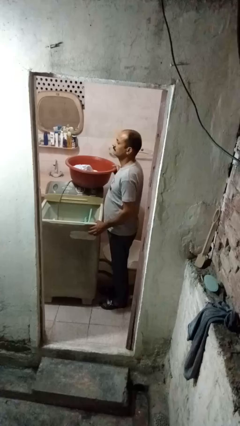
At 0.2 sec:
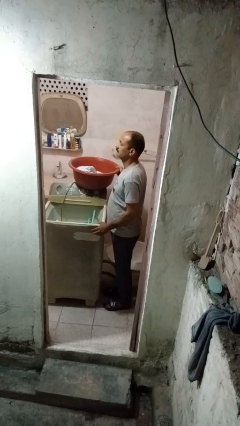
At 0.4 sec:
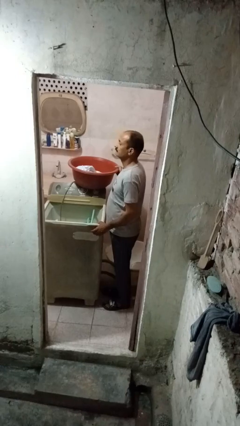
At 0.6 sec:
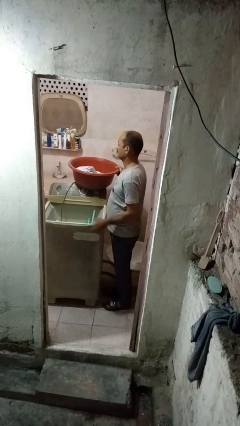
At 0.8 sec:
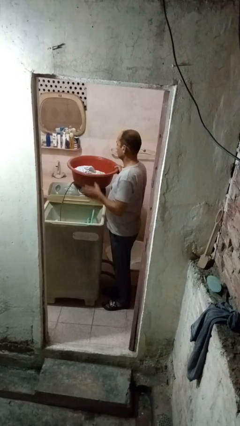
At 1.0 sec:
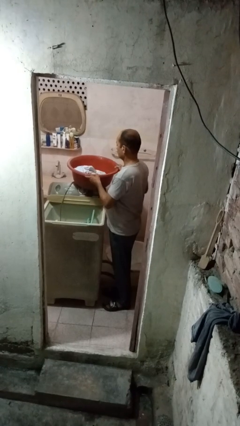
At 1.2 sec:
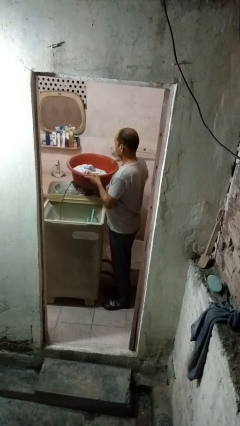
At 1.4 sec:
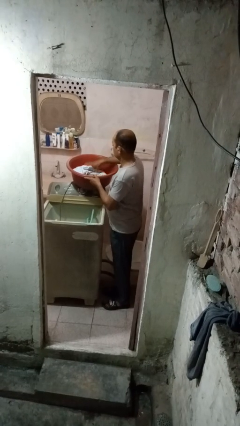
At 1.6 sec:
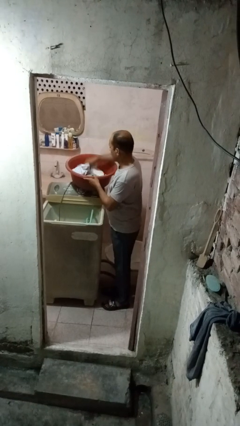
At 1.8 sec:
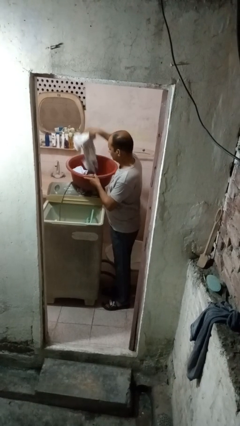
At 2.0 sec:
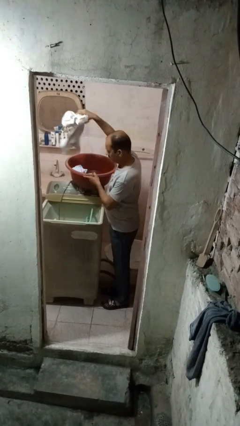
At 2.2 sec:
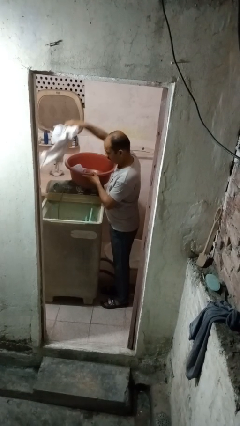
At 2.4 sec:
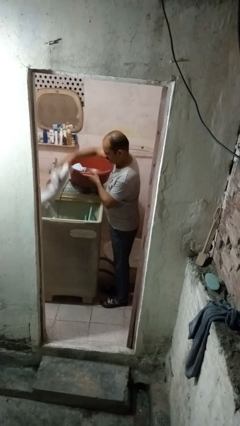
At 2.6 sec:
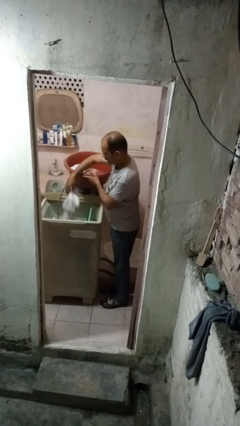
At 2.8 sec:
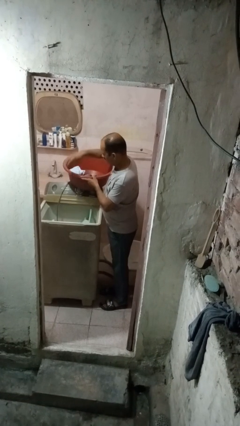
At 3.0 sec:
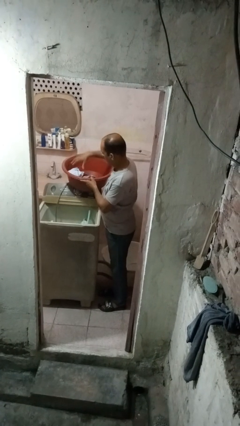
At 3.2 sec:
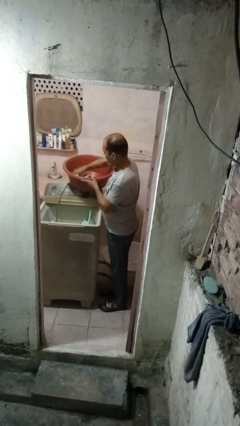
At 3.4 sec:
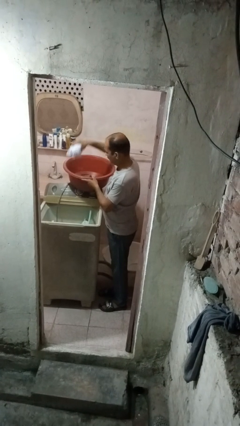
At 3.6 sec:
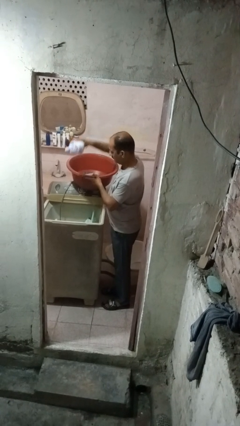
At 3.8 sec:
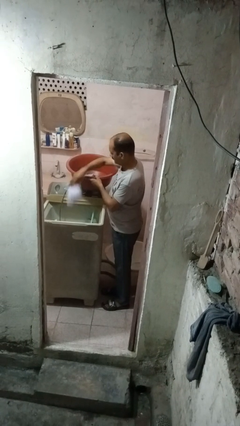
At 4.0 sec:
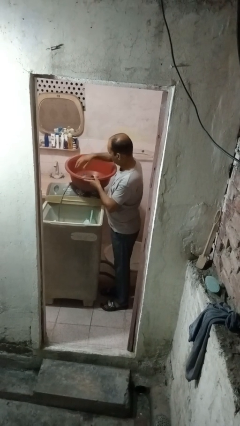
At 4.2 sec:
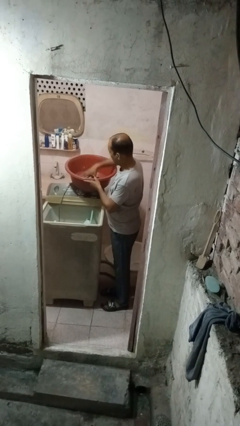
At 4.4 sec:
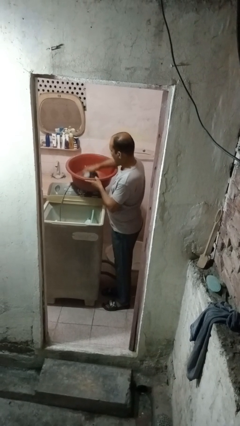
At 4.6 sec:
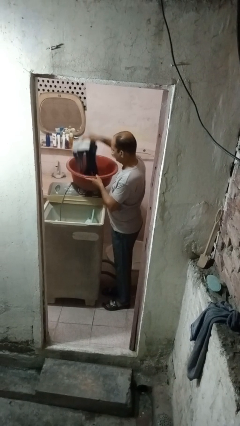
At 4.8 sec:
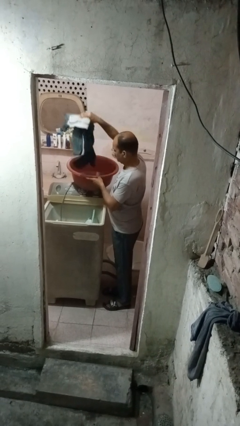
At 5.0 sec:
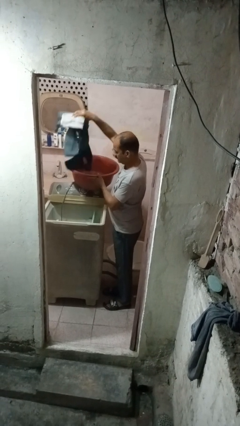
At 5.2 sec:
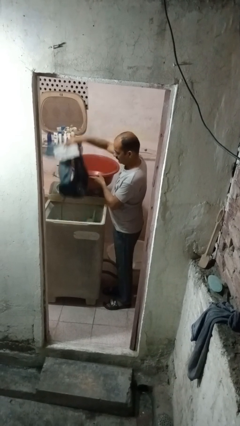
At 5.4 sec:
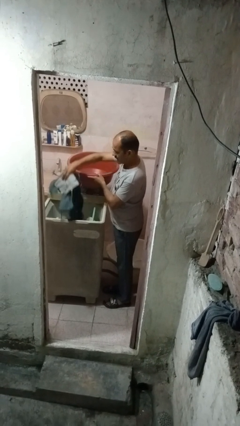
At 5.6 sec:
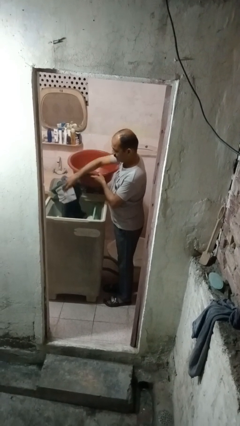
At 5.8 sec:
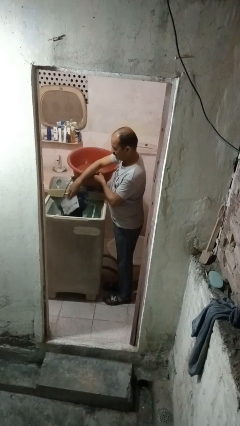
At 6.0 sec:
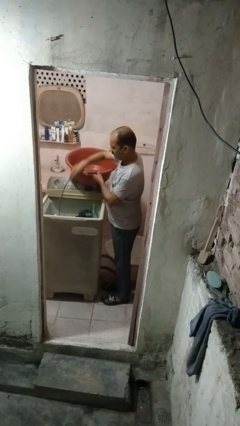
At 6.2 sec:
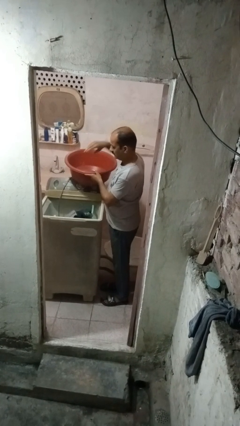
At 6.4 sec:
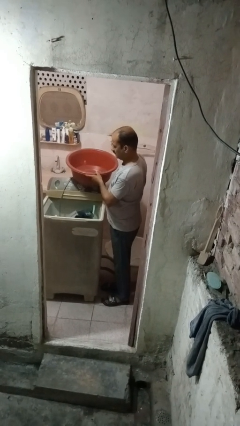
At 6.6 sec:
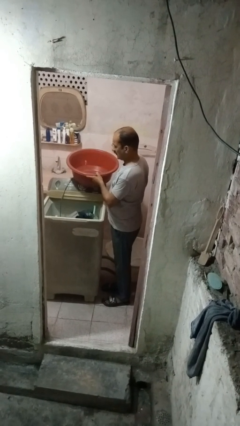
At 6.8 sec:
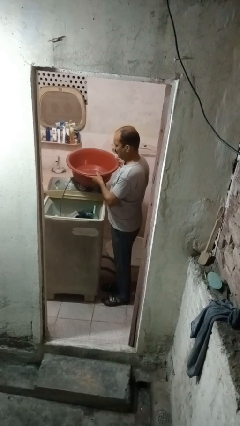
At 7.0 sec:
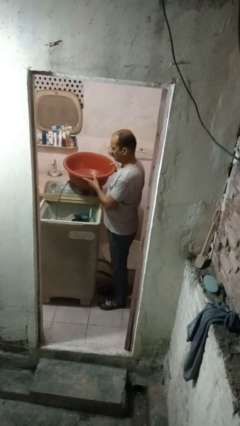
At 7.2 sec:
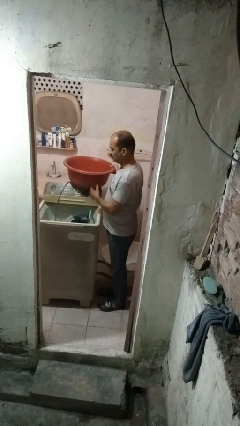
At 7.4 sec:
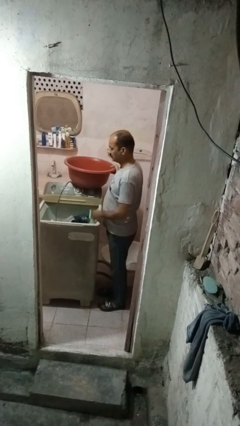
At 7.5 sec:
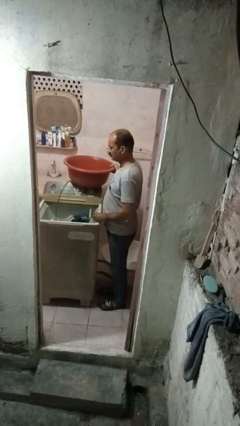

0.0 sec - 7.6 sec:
person loads dishwasher

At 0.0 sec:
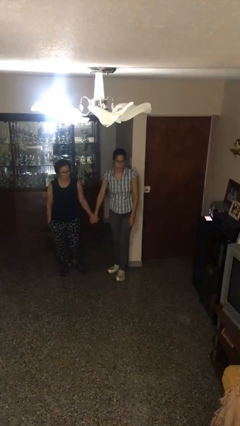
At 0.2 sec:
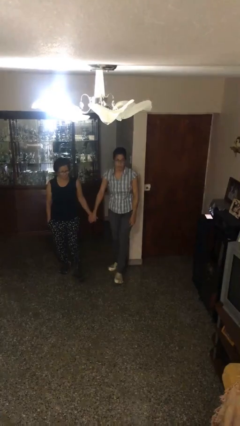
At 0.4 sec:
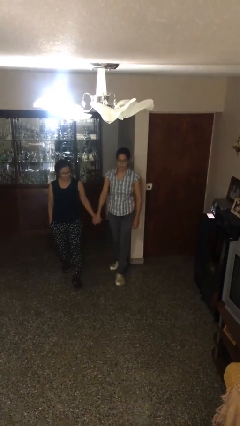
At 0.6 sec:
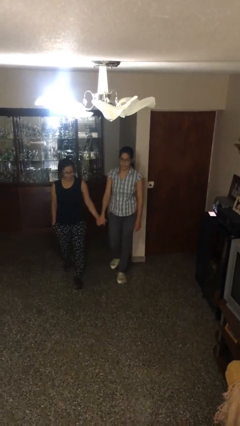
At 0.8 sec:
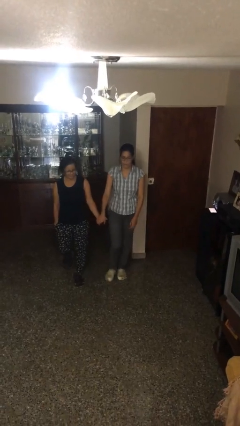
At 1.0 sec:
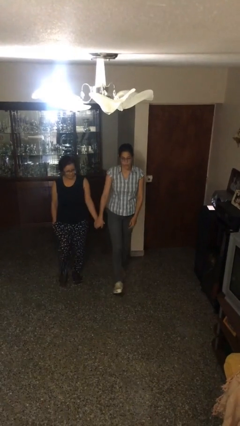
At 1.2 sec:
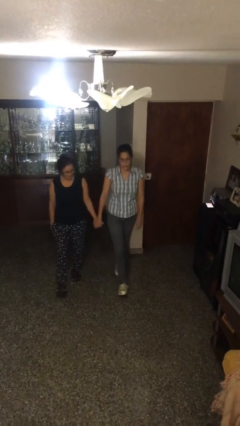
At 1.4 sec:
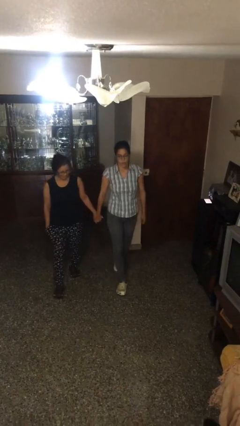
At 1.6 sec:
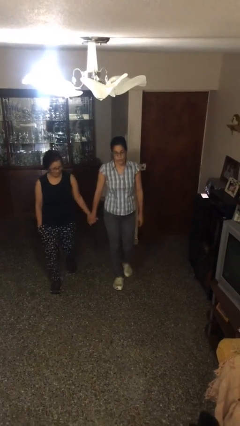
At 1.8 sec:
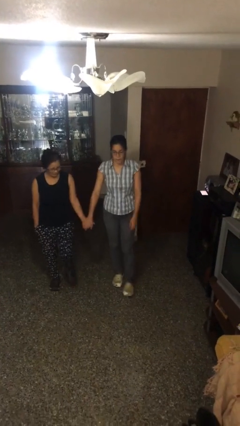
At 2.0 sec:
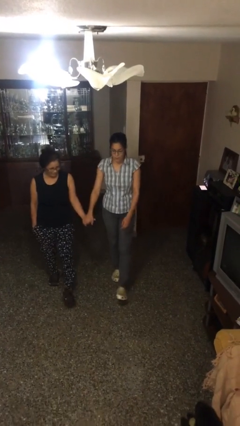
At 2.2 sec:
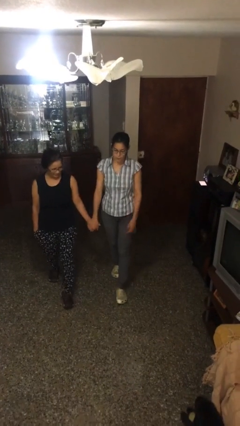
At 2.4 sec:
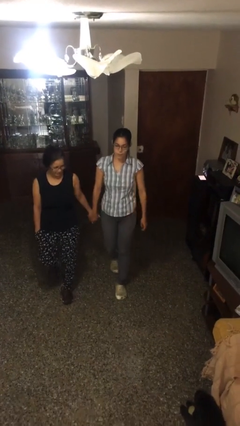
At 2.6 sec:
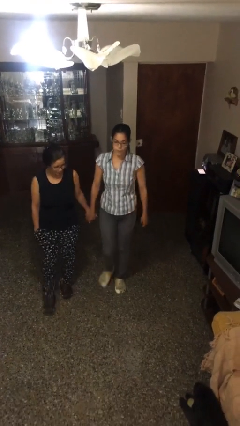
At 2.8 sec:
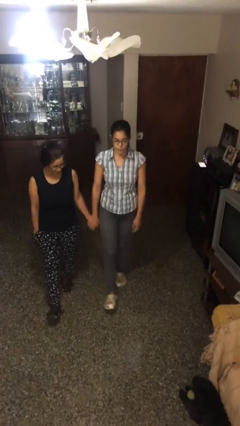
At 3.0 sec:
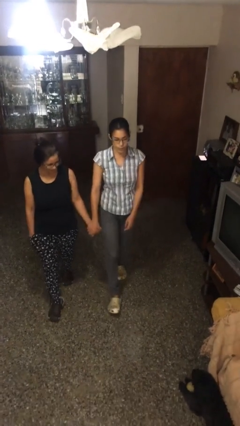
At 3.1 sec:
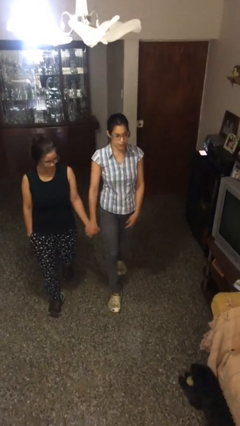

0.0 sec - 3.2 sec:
person holds hand

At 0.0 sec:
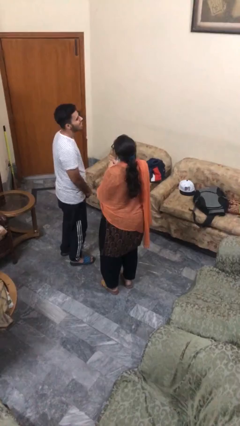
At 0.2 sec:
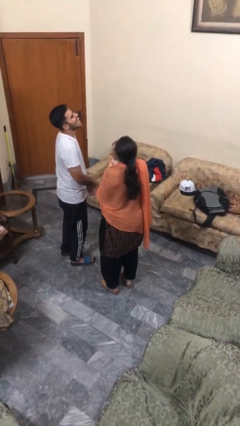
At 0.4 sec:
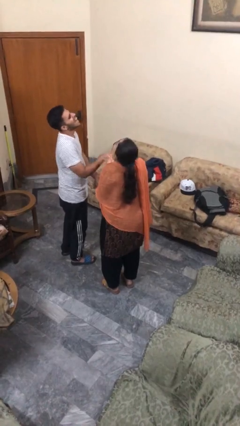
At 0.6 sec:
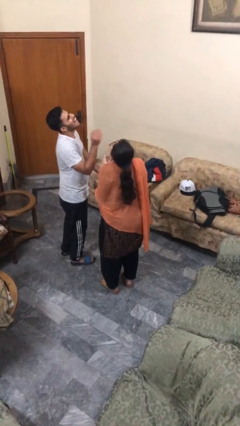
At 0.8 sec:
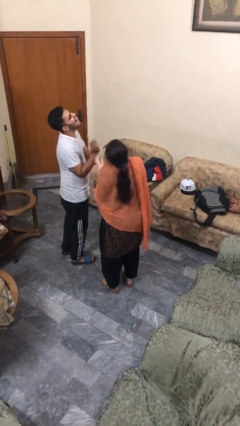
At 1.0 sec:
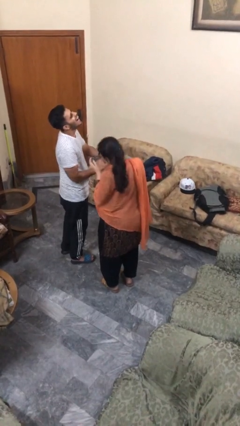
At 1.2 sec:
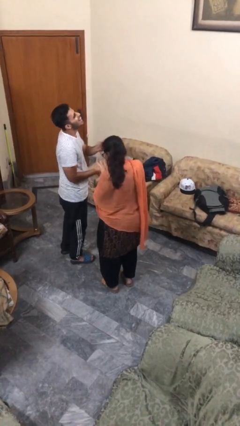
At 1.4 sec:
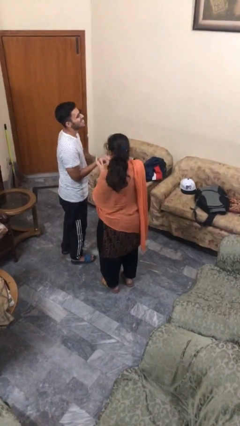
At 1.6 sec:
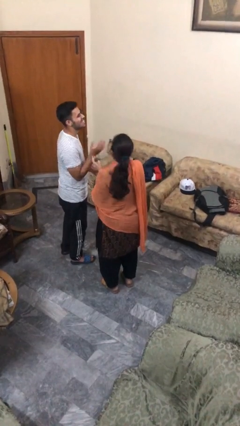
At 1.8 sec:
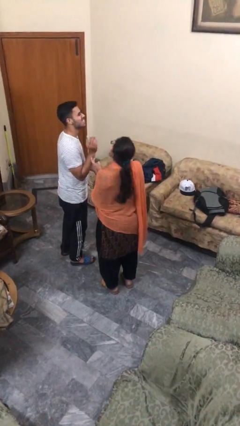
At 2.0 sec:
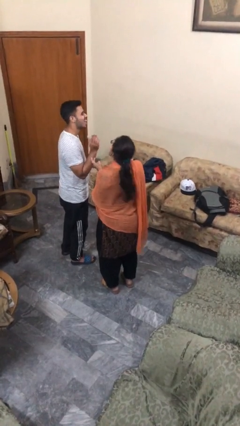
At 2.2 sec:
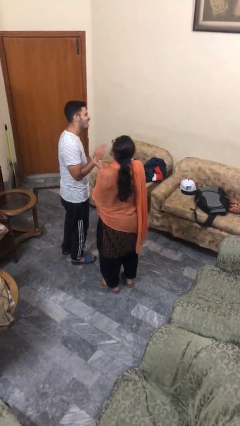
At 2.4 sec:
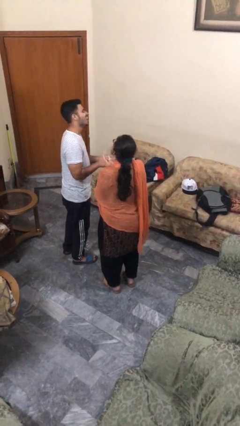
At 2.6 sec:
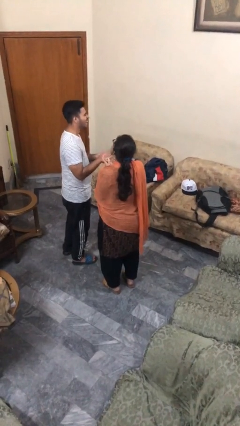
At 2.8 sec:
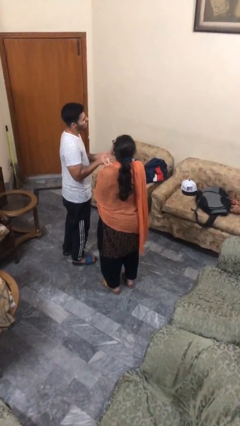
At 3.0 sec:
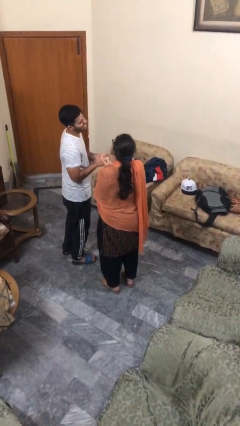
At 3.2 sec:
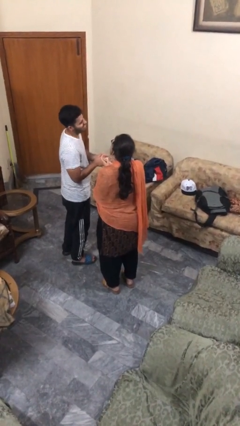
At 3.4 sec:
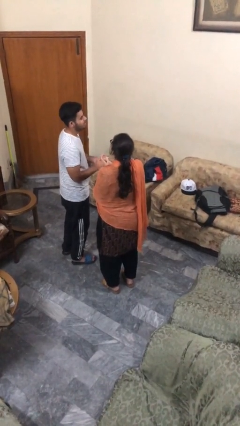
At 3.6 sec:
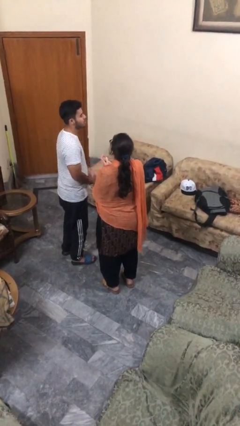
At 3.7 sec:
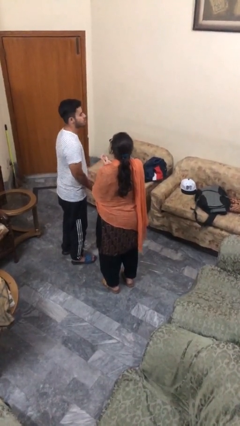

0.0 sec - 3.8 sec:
person laughs with person

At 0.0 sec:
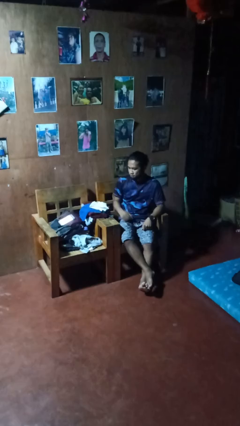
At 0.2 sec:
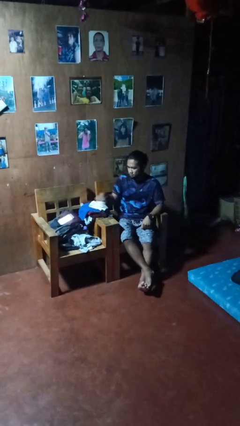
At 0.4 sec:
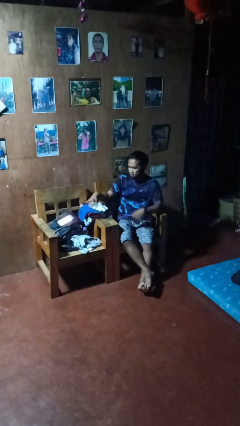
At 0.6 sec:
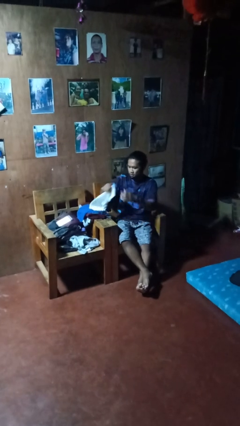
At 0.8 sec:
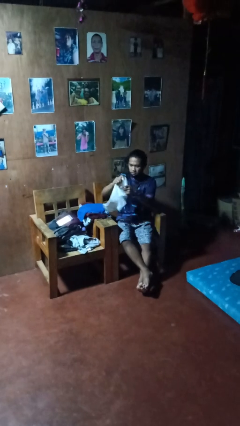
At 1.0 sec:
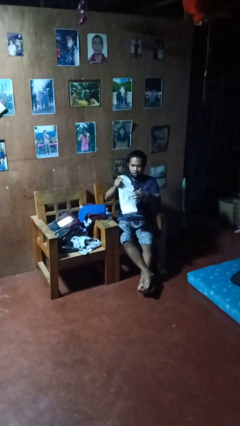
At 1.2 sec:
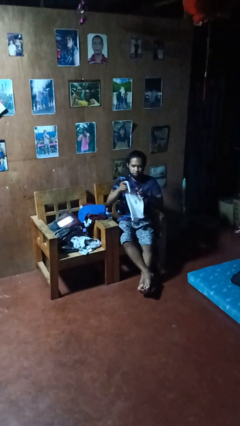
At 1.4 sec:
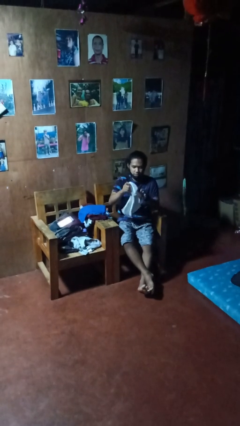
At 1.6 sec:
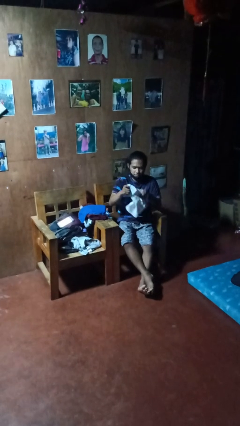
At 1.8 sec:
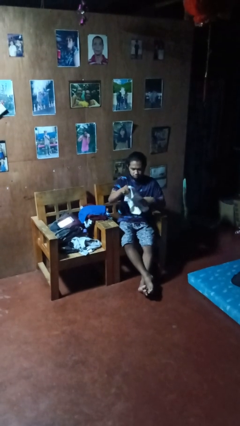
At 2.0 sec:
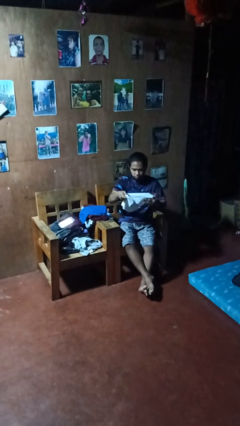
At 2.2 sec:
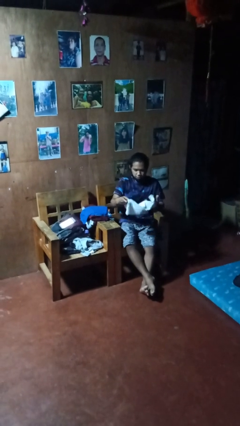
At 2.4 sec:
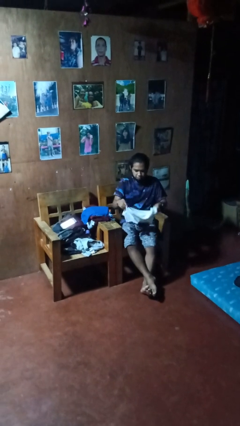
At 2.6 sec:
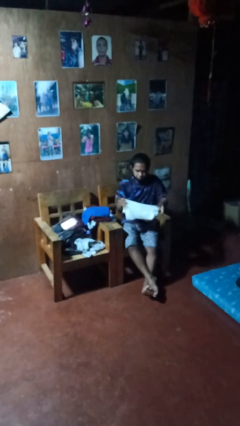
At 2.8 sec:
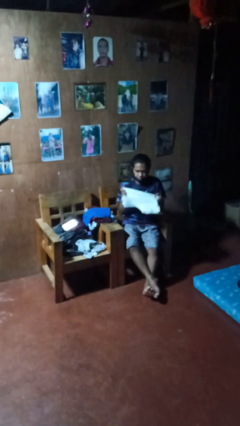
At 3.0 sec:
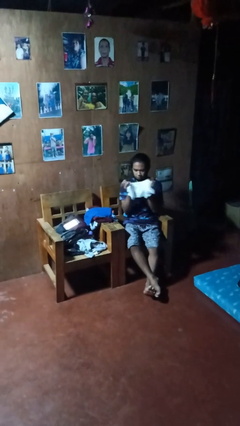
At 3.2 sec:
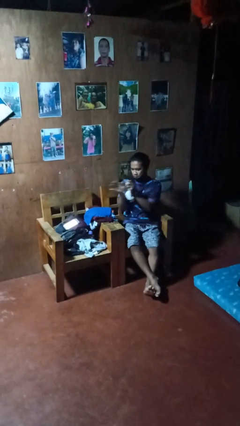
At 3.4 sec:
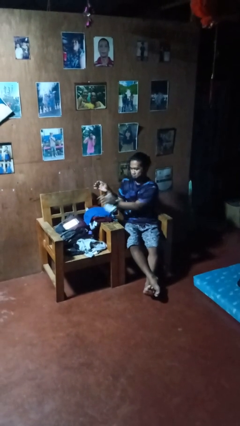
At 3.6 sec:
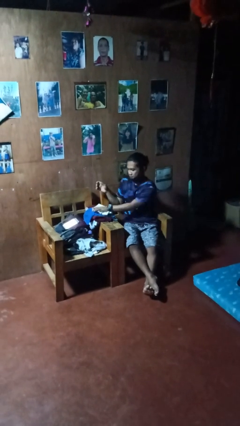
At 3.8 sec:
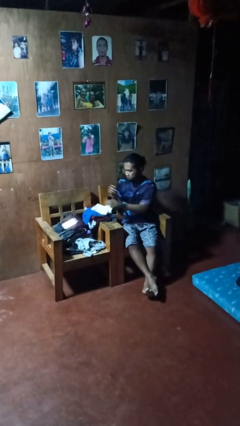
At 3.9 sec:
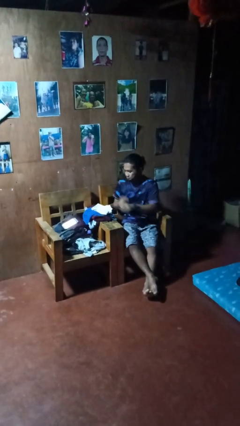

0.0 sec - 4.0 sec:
person folds shirt
